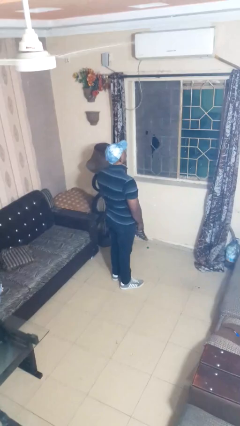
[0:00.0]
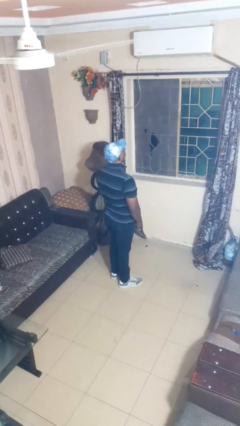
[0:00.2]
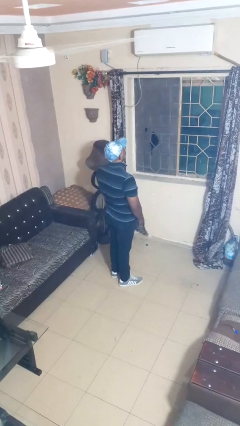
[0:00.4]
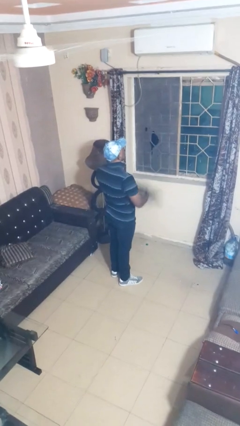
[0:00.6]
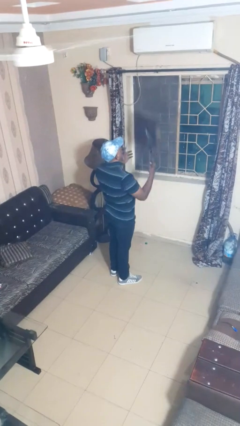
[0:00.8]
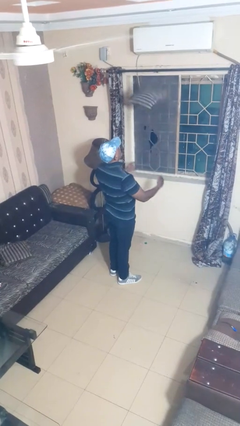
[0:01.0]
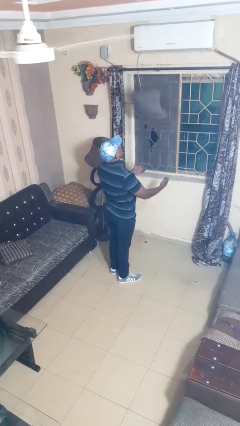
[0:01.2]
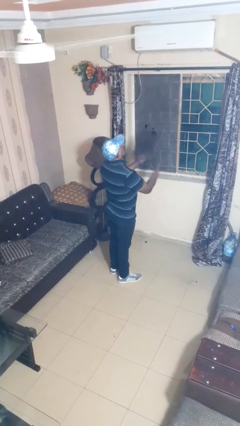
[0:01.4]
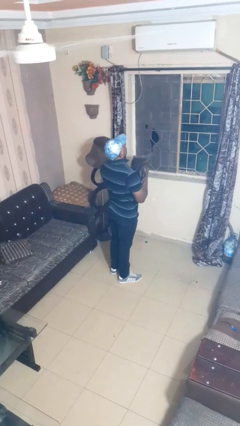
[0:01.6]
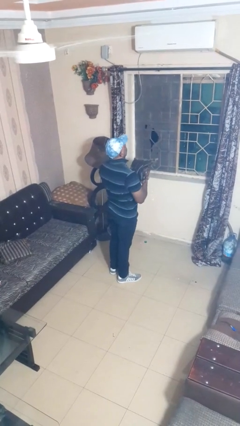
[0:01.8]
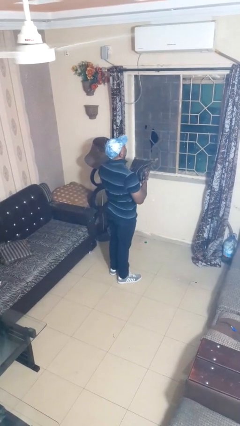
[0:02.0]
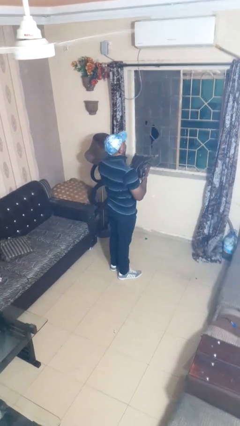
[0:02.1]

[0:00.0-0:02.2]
person drops object

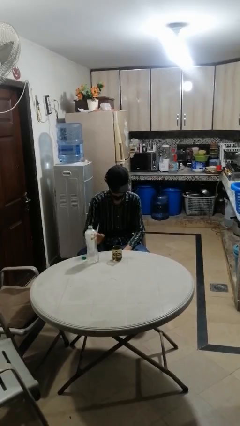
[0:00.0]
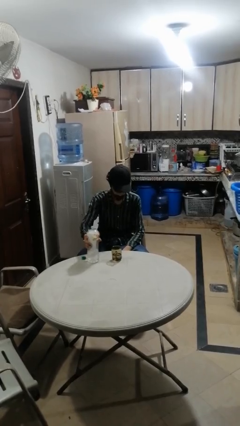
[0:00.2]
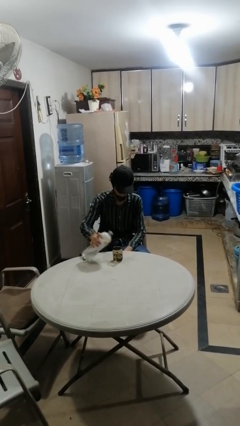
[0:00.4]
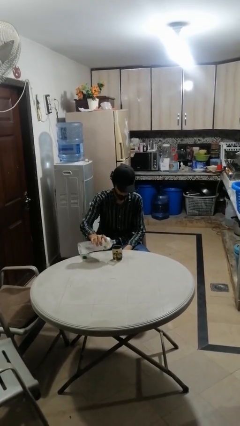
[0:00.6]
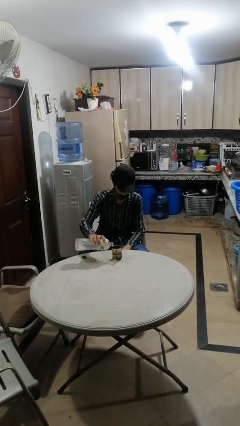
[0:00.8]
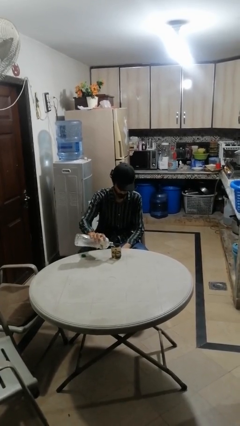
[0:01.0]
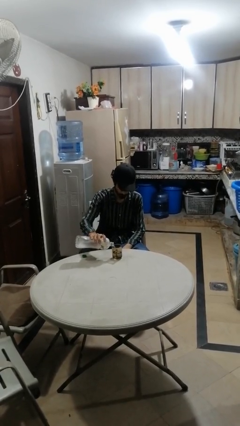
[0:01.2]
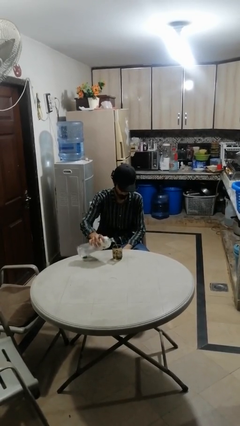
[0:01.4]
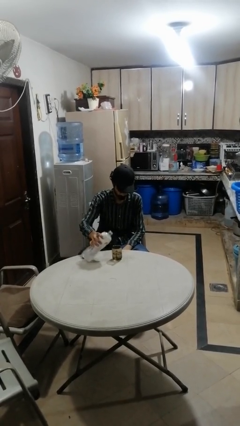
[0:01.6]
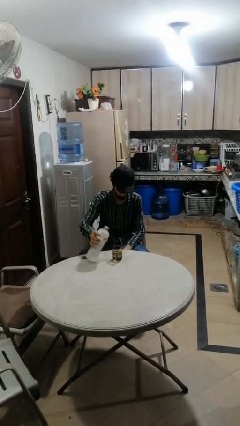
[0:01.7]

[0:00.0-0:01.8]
person pours liquid into cup

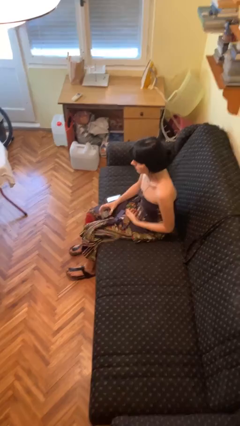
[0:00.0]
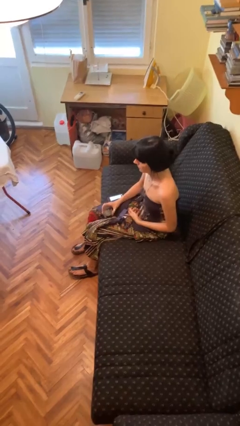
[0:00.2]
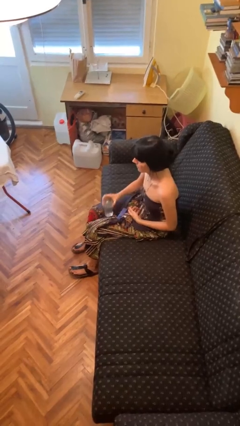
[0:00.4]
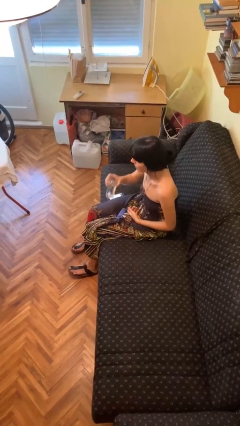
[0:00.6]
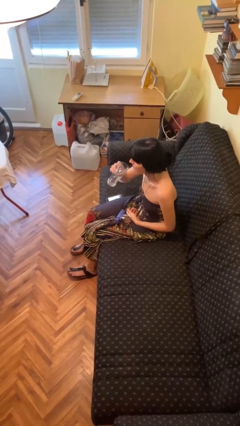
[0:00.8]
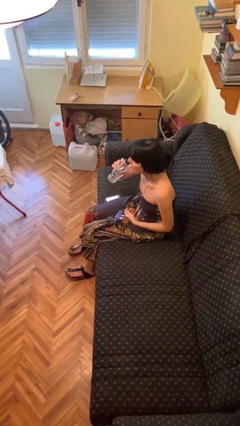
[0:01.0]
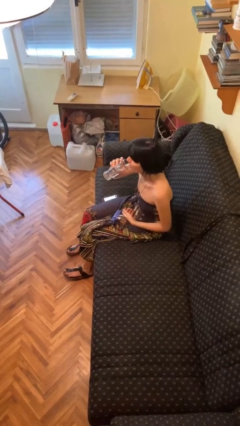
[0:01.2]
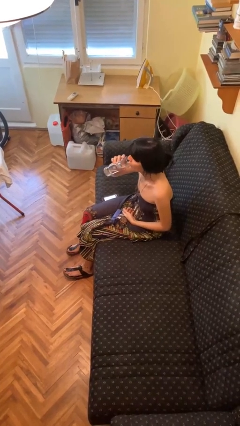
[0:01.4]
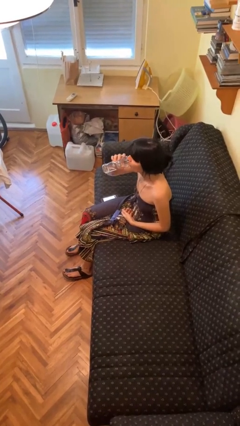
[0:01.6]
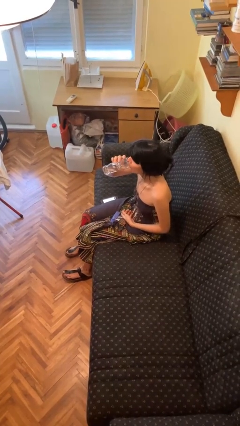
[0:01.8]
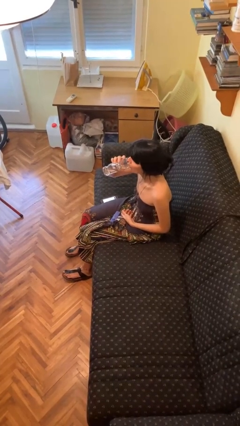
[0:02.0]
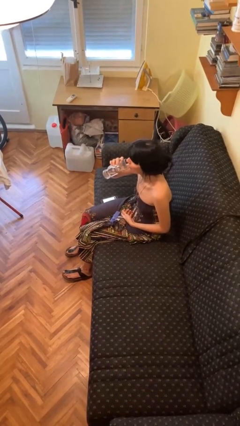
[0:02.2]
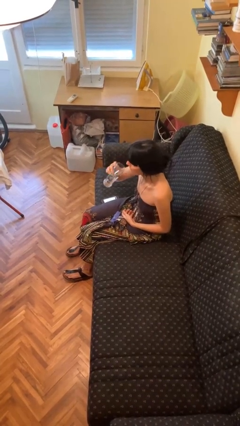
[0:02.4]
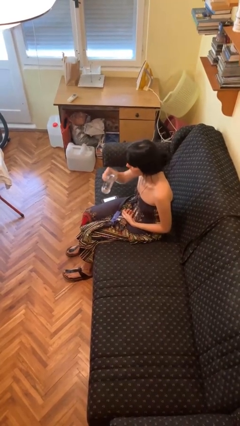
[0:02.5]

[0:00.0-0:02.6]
person drinks from cup

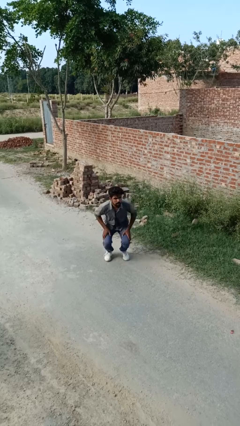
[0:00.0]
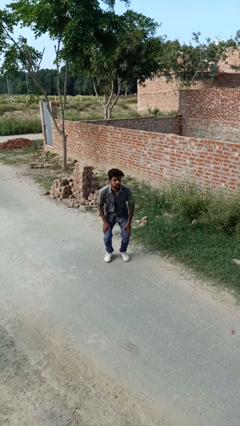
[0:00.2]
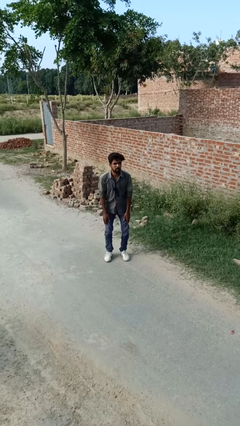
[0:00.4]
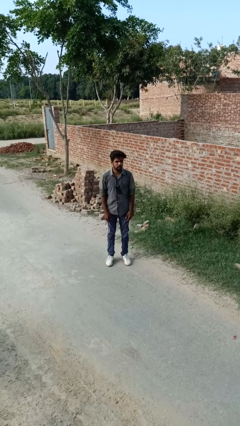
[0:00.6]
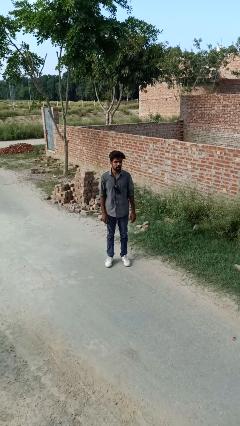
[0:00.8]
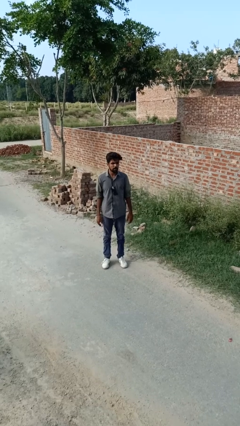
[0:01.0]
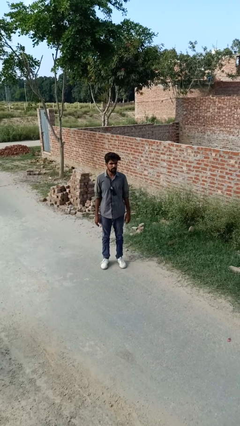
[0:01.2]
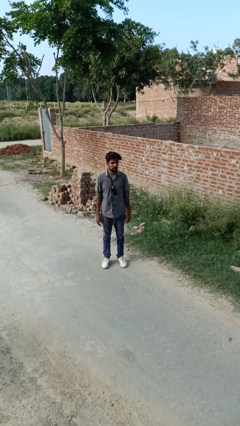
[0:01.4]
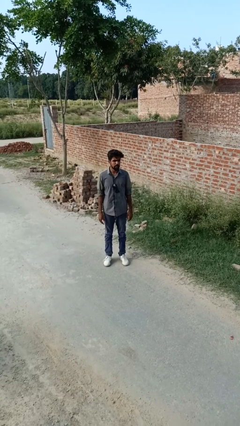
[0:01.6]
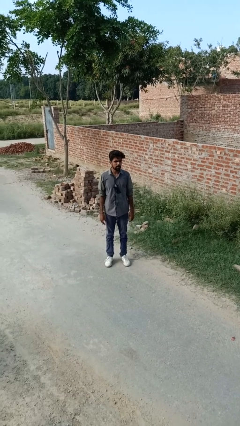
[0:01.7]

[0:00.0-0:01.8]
person stands up from floor

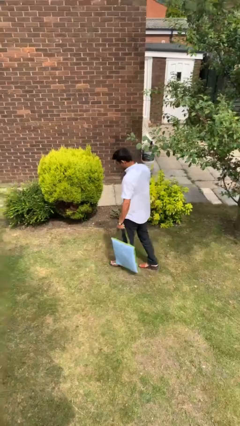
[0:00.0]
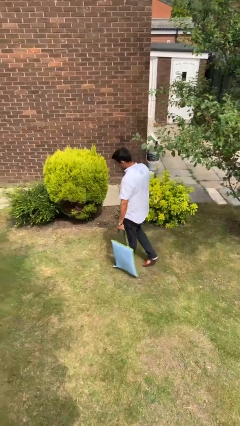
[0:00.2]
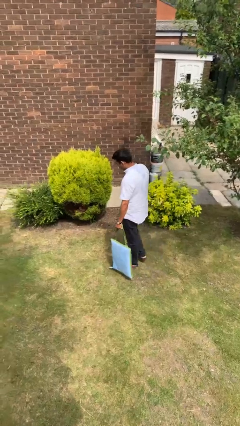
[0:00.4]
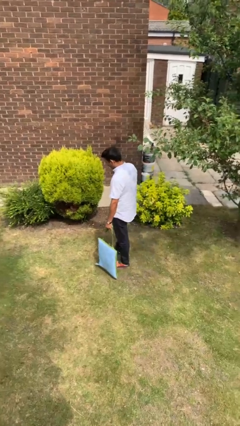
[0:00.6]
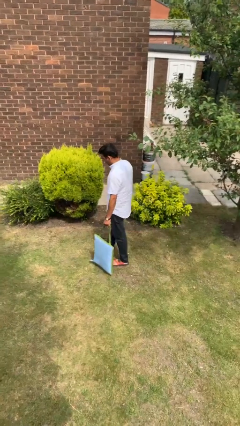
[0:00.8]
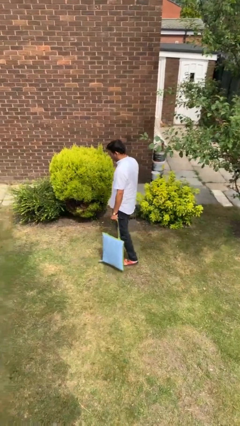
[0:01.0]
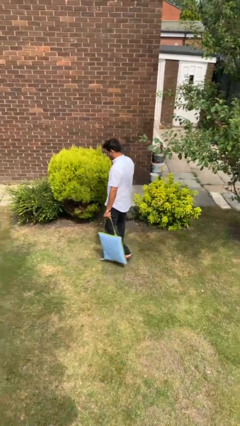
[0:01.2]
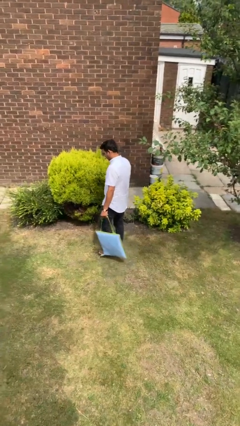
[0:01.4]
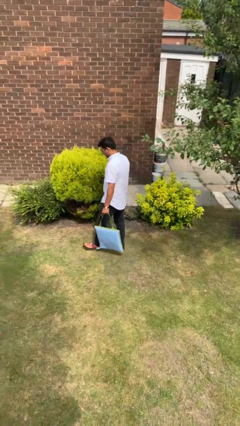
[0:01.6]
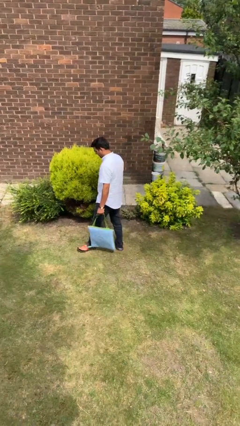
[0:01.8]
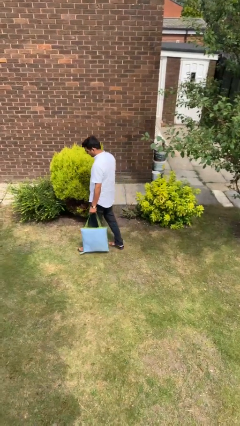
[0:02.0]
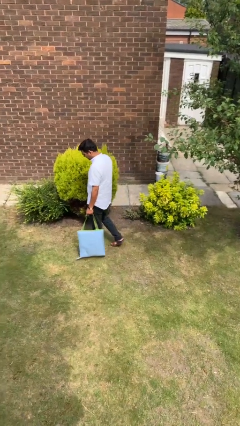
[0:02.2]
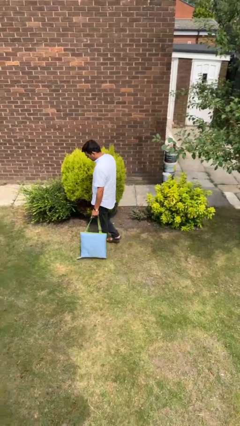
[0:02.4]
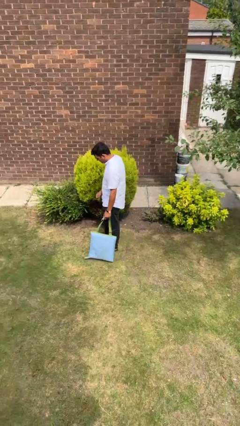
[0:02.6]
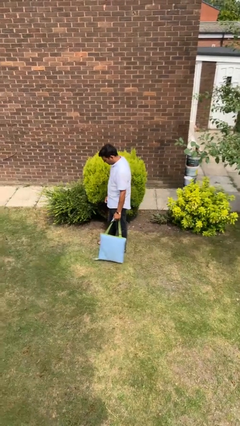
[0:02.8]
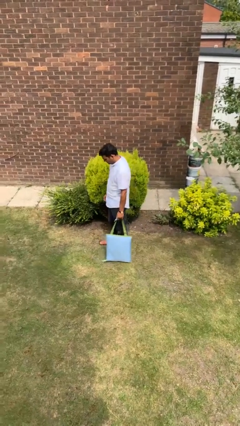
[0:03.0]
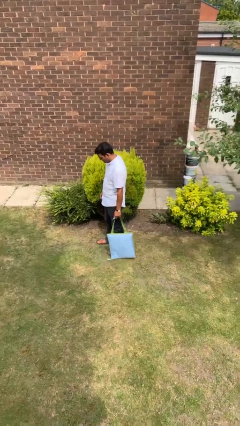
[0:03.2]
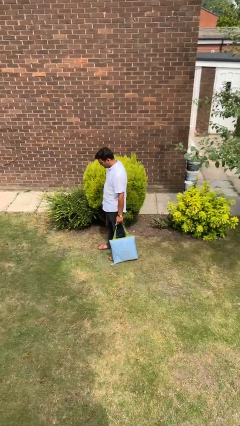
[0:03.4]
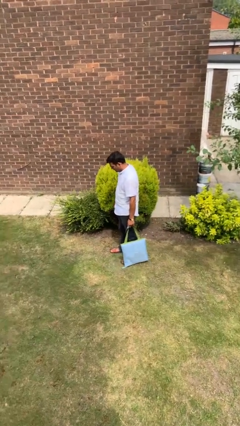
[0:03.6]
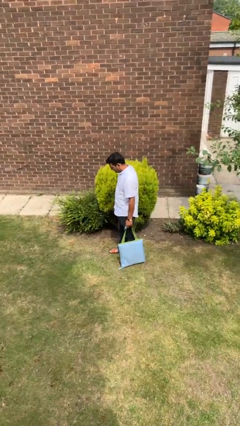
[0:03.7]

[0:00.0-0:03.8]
person carries groceries

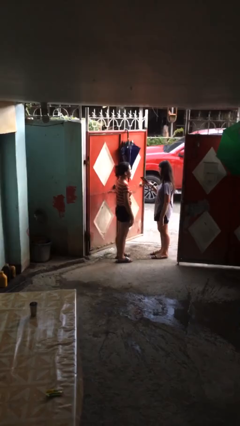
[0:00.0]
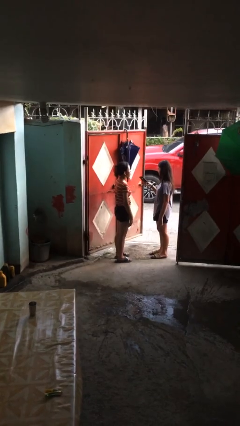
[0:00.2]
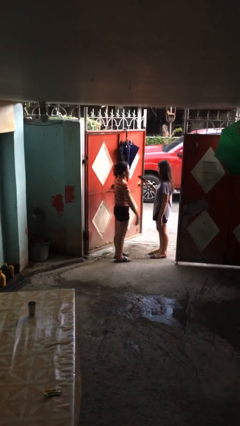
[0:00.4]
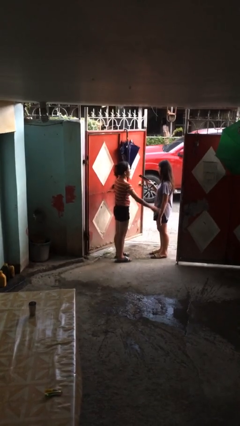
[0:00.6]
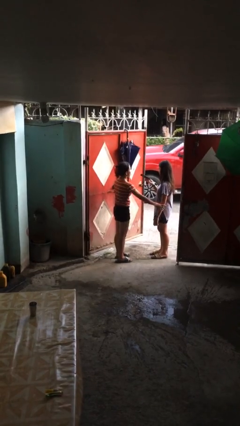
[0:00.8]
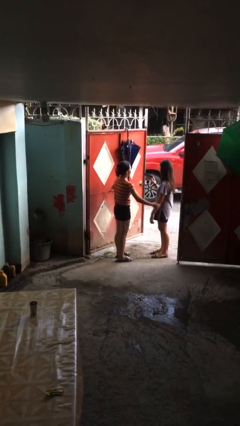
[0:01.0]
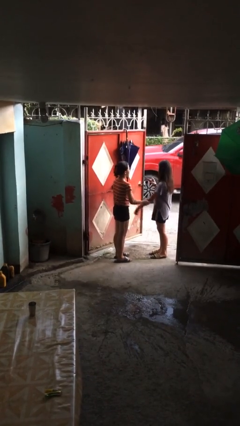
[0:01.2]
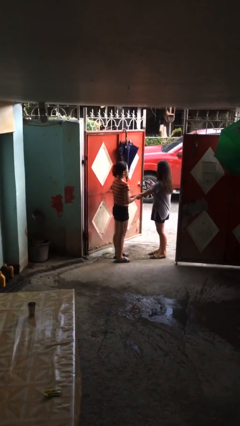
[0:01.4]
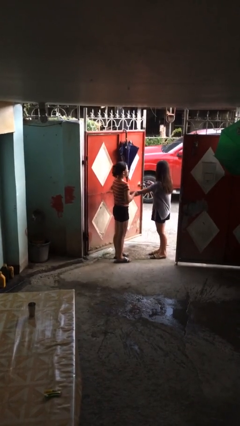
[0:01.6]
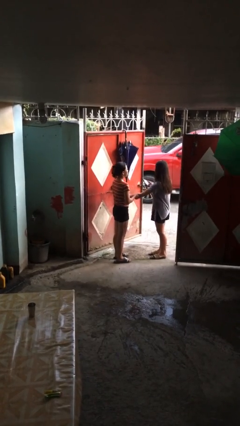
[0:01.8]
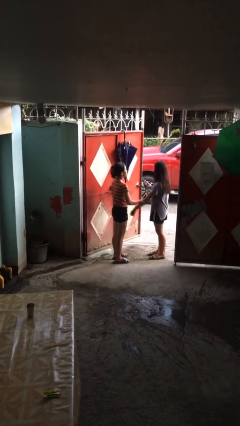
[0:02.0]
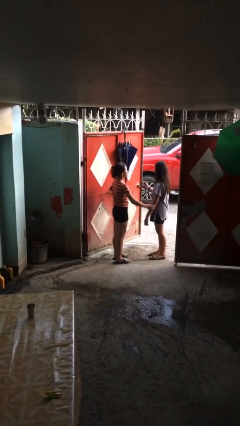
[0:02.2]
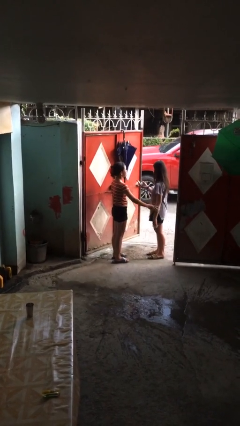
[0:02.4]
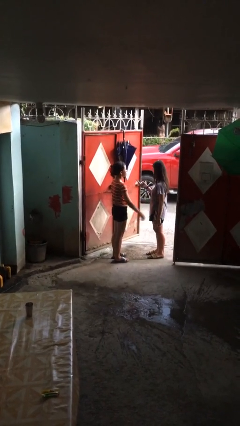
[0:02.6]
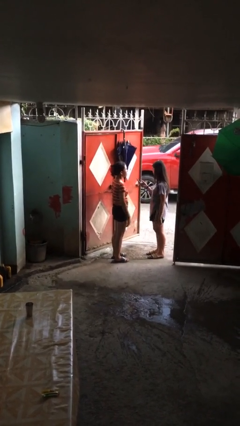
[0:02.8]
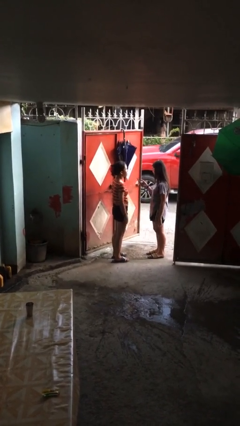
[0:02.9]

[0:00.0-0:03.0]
person grabs person by forearm

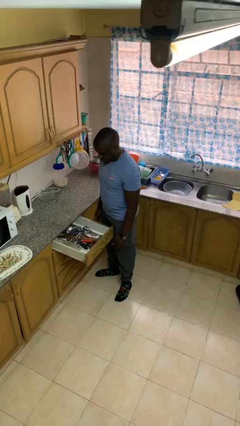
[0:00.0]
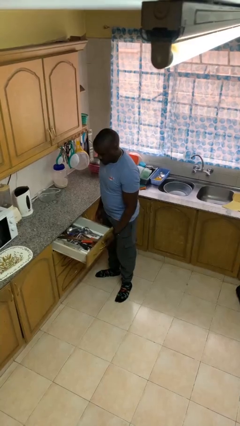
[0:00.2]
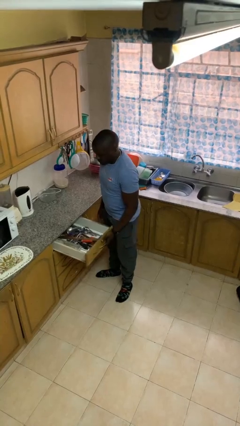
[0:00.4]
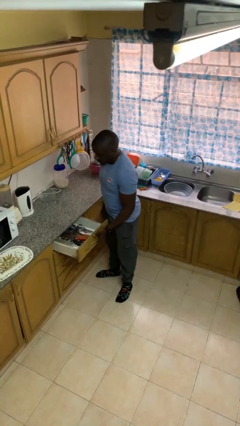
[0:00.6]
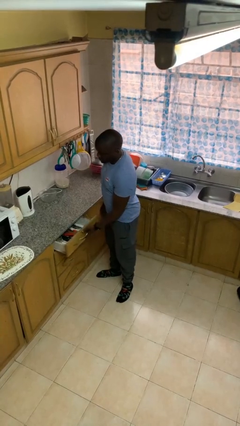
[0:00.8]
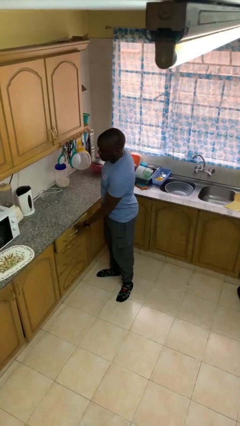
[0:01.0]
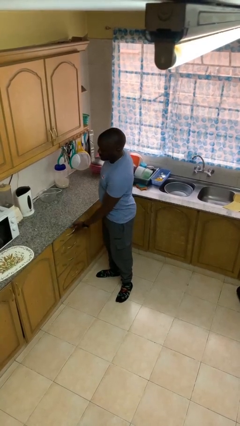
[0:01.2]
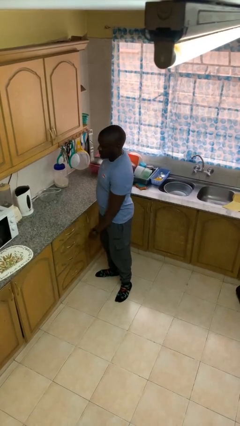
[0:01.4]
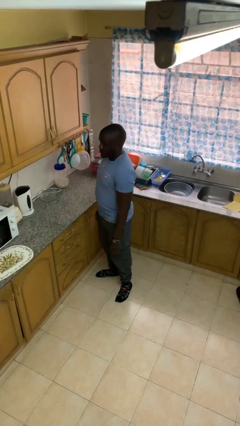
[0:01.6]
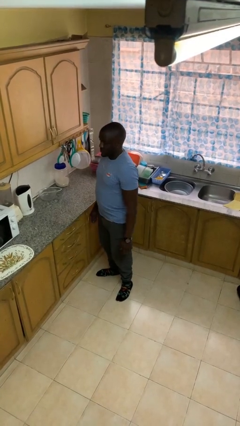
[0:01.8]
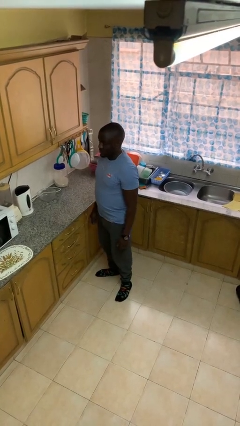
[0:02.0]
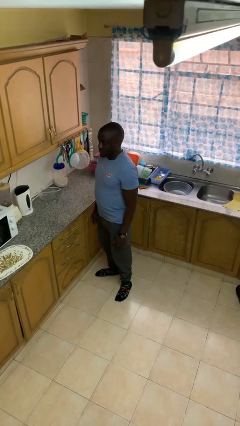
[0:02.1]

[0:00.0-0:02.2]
person closes kitchen drawer
